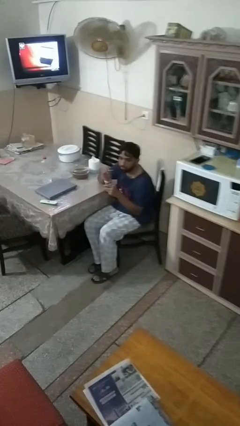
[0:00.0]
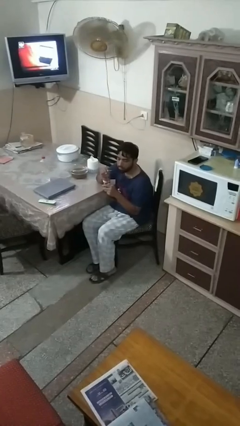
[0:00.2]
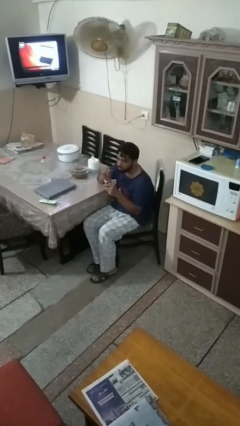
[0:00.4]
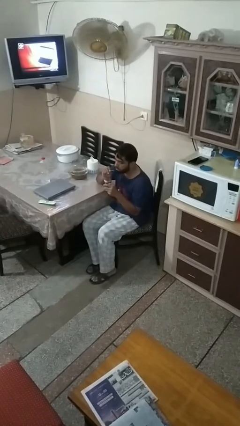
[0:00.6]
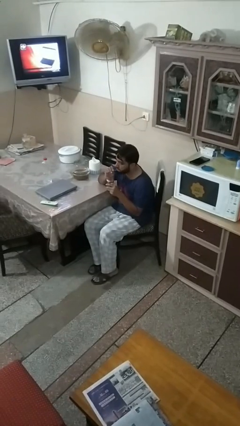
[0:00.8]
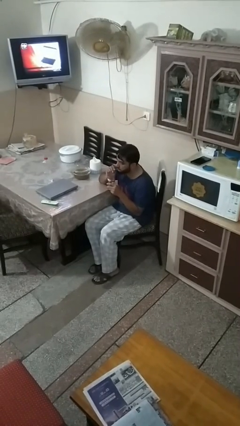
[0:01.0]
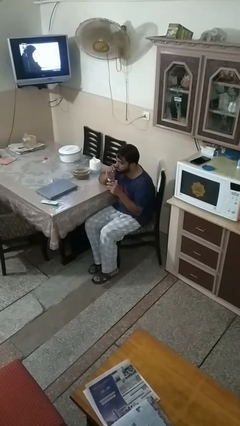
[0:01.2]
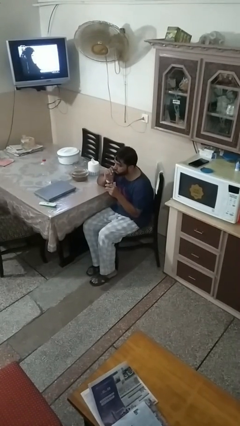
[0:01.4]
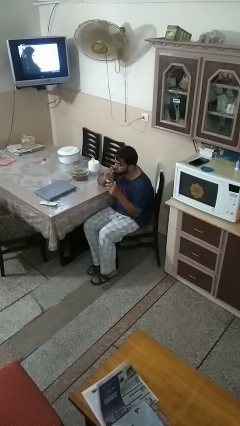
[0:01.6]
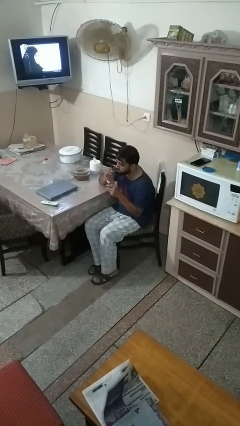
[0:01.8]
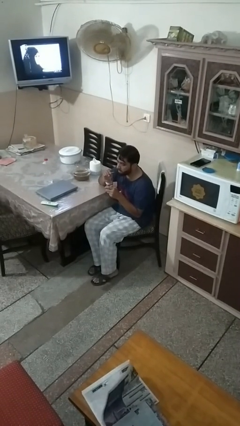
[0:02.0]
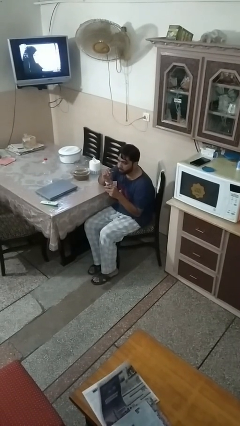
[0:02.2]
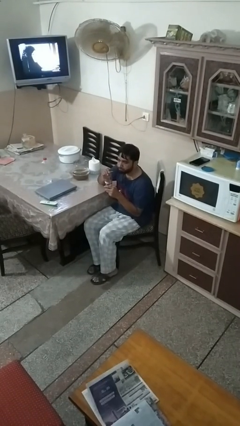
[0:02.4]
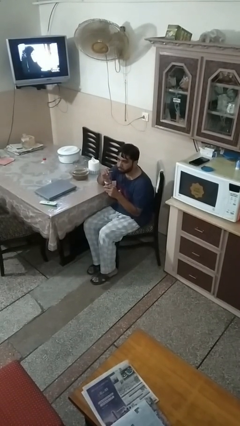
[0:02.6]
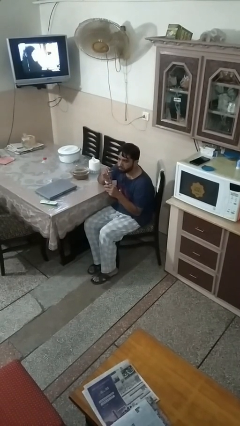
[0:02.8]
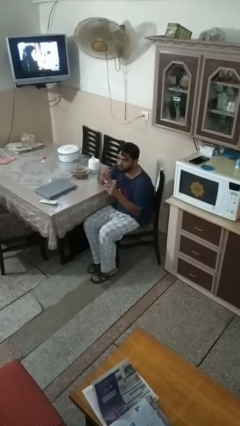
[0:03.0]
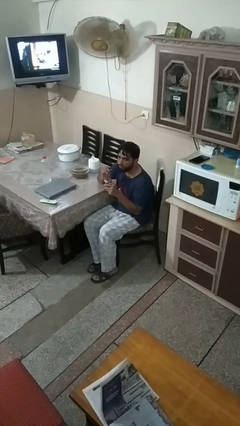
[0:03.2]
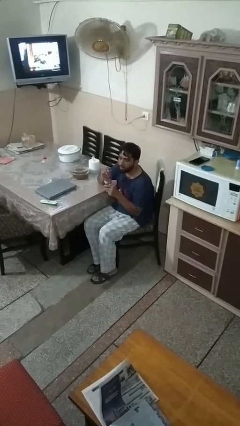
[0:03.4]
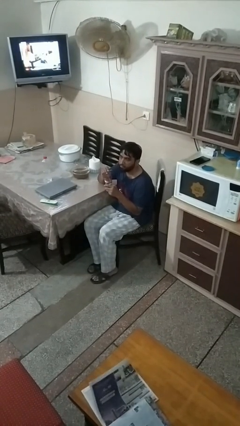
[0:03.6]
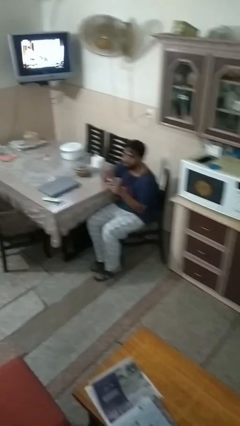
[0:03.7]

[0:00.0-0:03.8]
person drinks from straw

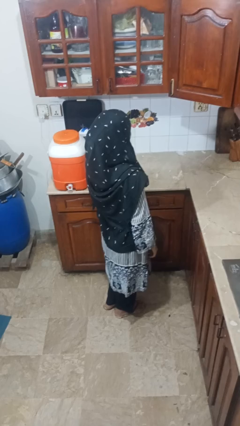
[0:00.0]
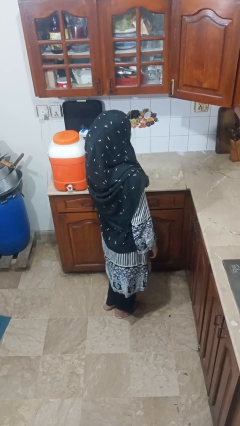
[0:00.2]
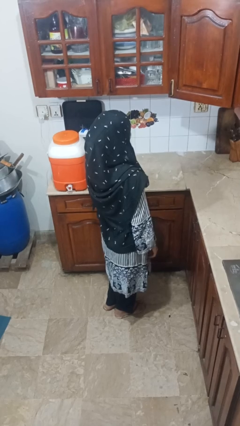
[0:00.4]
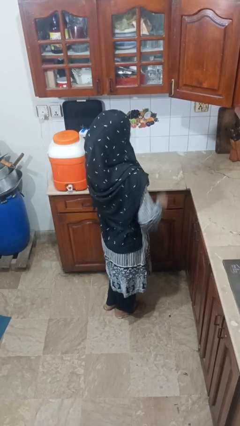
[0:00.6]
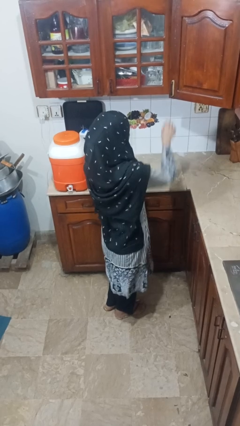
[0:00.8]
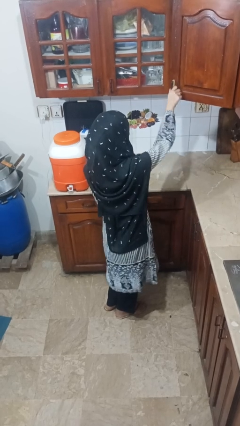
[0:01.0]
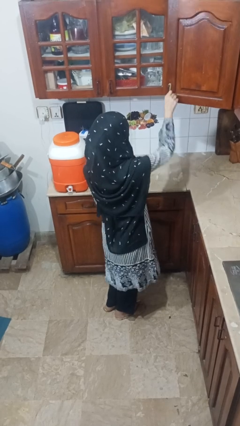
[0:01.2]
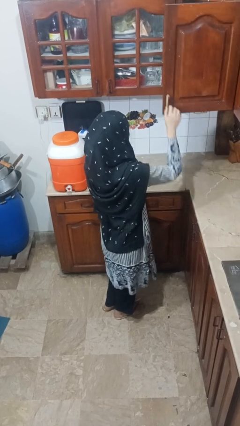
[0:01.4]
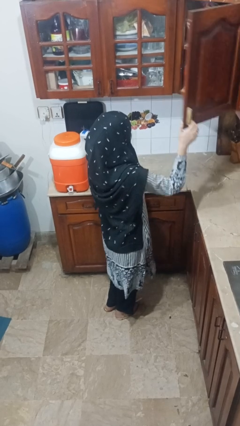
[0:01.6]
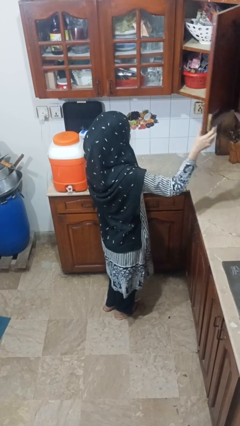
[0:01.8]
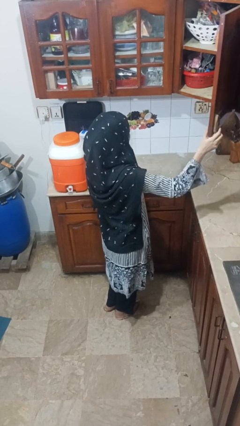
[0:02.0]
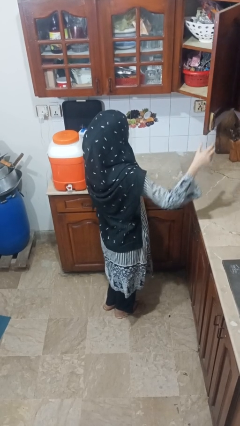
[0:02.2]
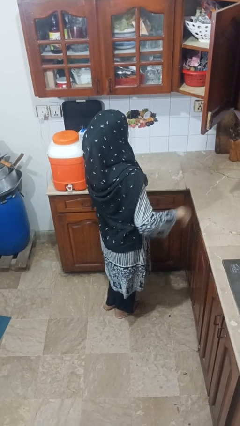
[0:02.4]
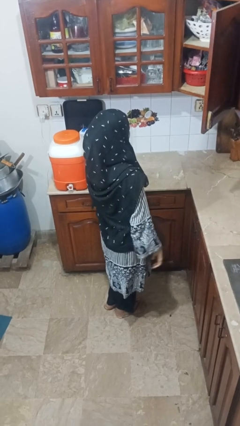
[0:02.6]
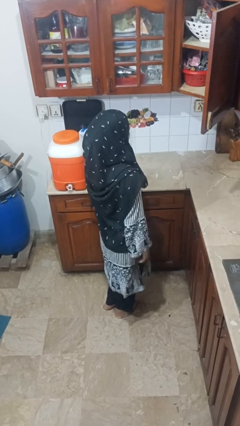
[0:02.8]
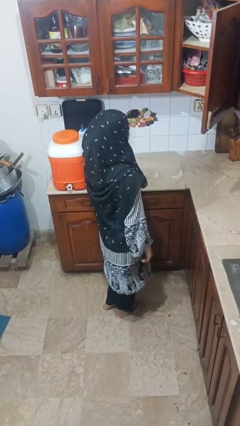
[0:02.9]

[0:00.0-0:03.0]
person opens cabinet

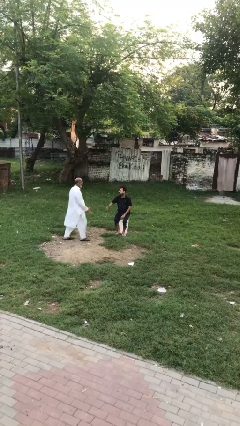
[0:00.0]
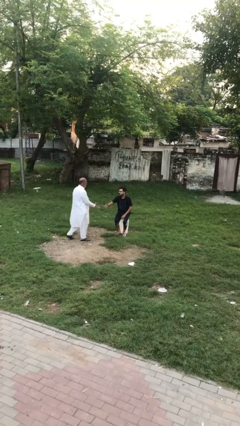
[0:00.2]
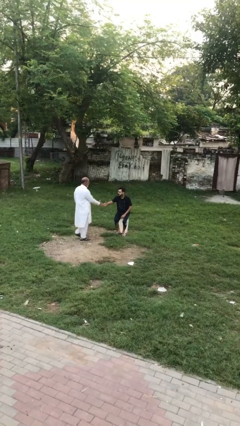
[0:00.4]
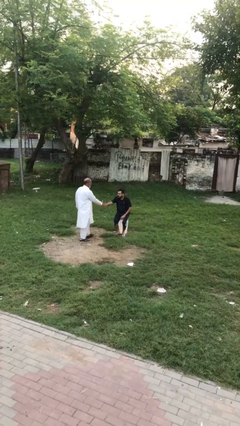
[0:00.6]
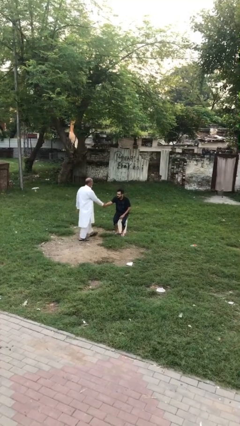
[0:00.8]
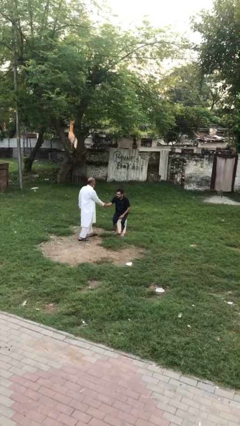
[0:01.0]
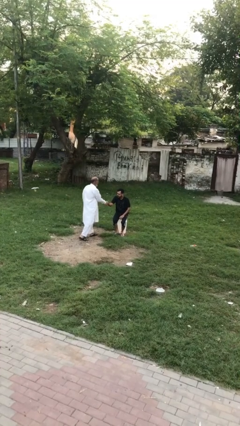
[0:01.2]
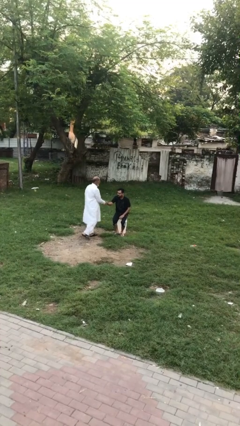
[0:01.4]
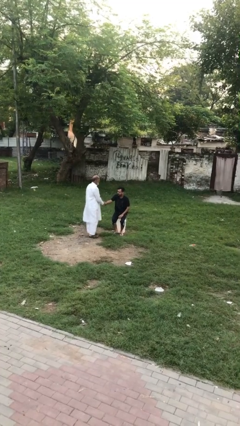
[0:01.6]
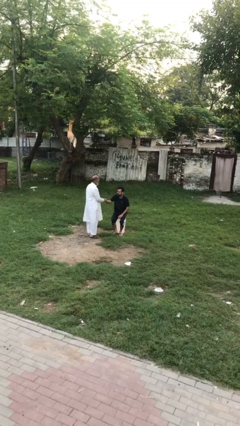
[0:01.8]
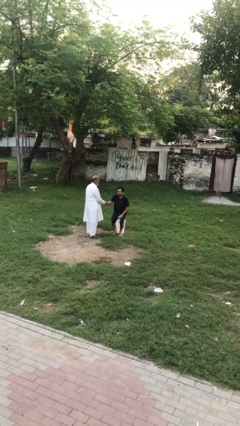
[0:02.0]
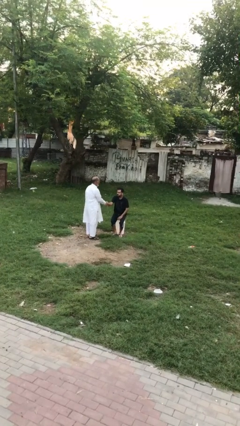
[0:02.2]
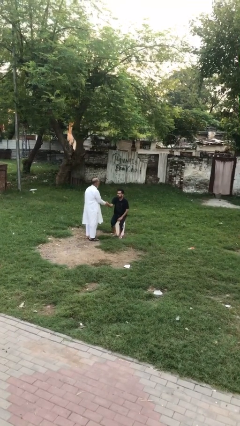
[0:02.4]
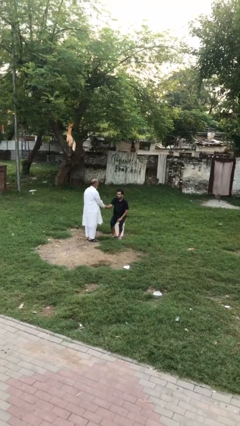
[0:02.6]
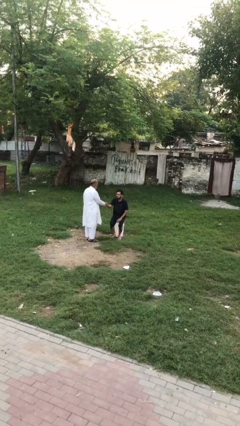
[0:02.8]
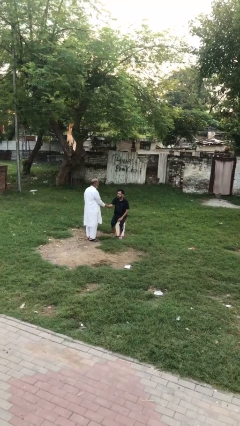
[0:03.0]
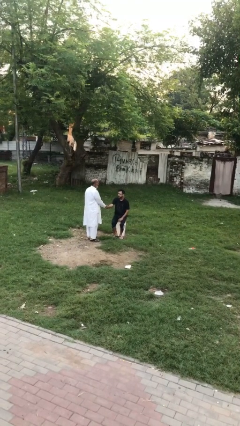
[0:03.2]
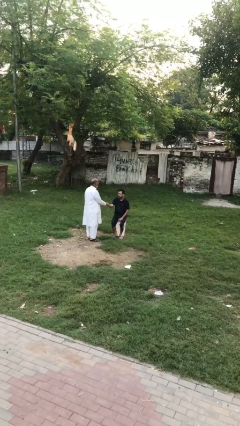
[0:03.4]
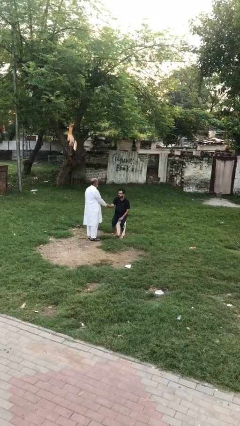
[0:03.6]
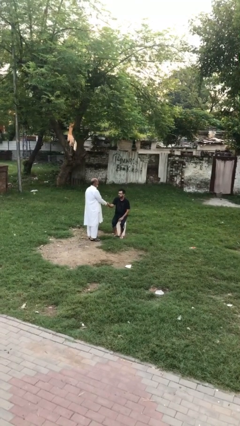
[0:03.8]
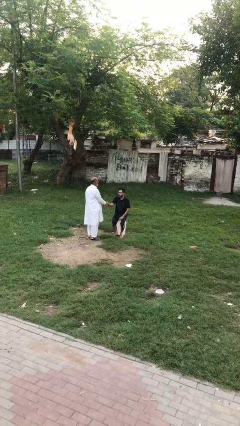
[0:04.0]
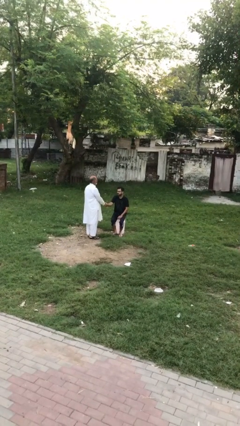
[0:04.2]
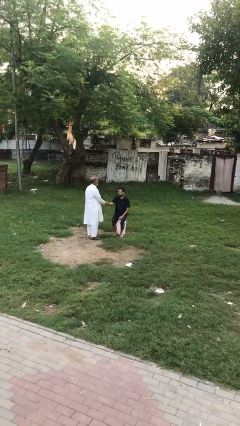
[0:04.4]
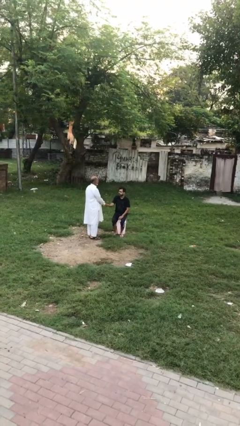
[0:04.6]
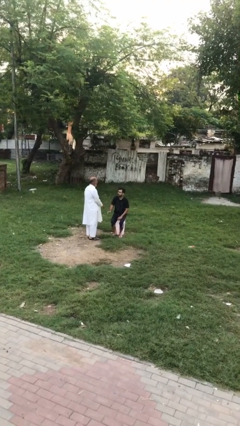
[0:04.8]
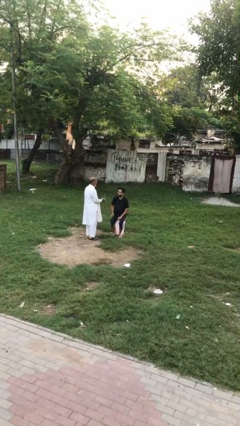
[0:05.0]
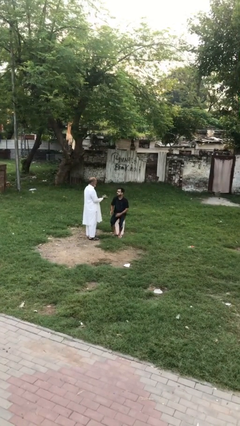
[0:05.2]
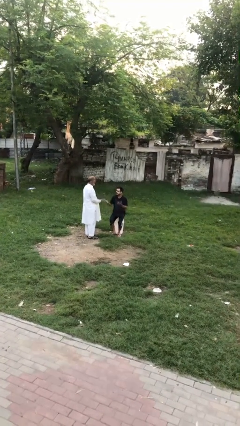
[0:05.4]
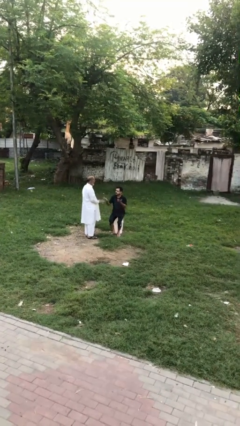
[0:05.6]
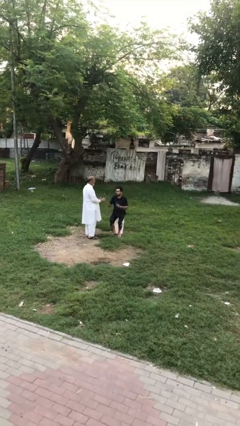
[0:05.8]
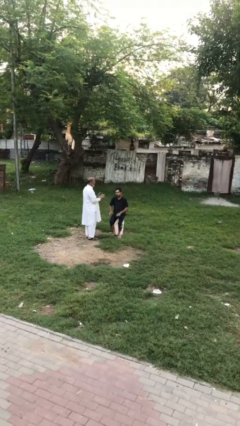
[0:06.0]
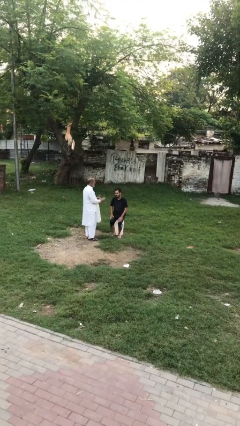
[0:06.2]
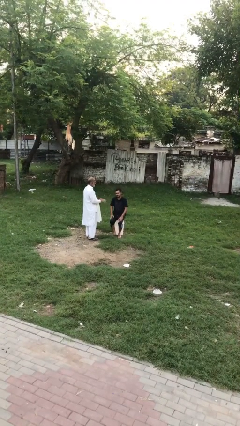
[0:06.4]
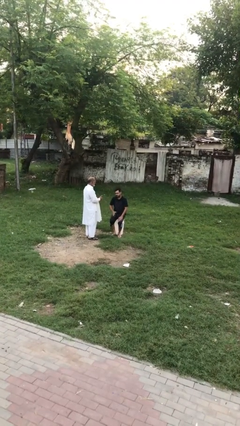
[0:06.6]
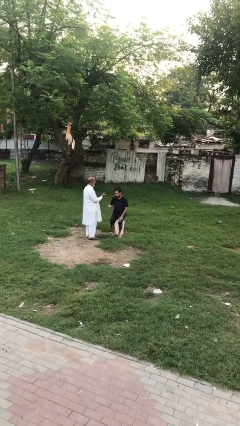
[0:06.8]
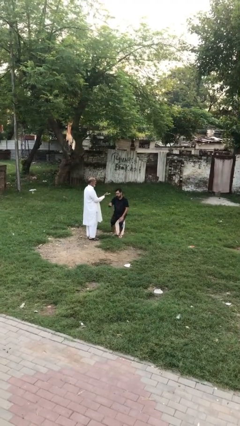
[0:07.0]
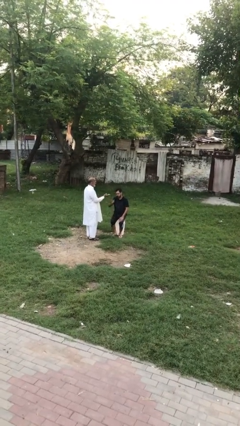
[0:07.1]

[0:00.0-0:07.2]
person shakes hand

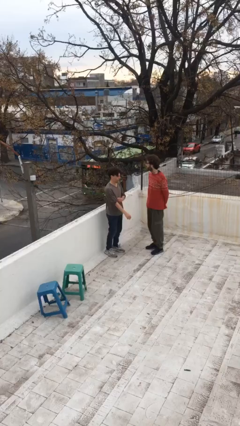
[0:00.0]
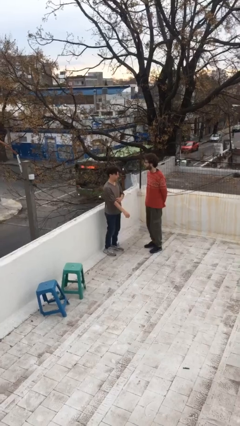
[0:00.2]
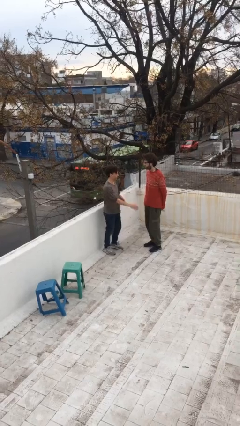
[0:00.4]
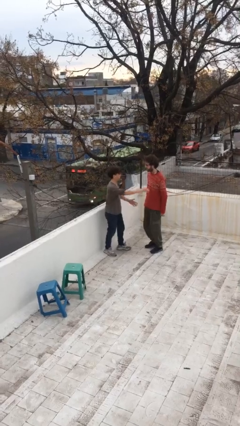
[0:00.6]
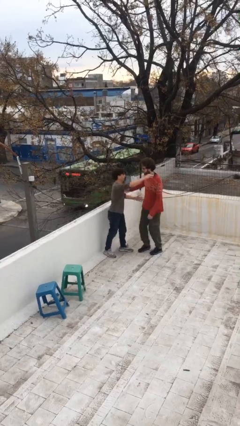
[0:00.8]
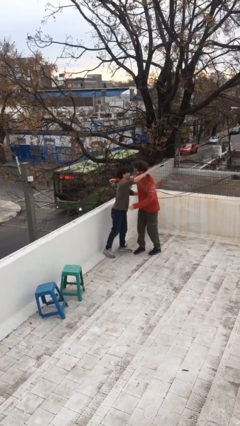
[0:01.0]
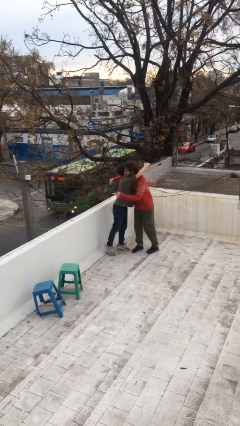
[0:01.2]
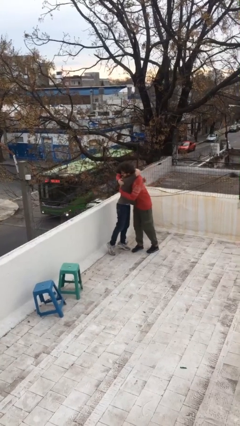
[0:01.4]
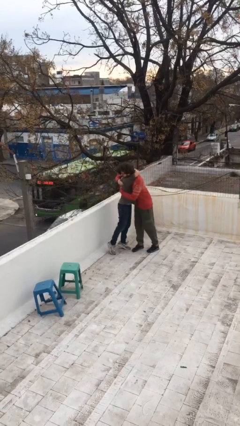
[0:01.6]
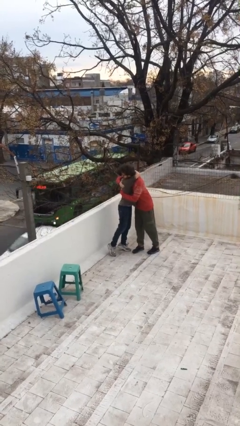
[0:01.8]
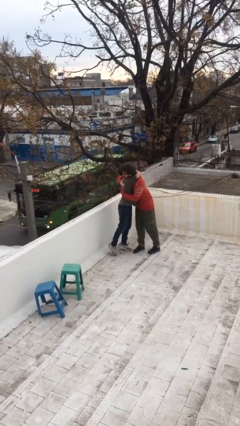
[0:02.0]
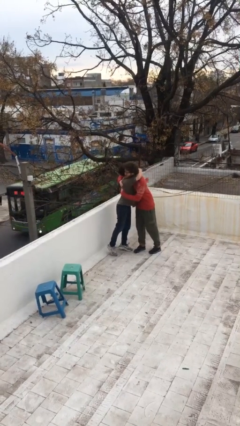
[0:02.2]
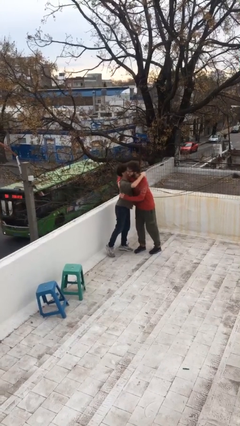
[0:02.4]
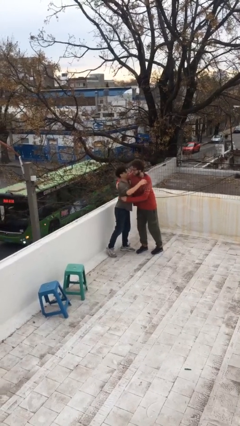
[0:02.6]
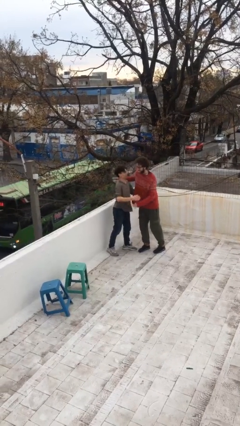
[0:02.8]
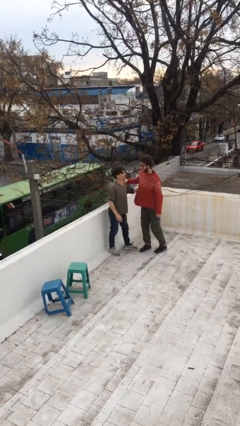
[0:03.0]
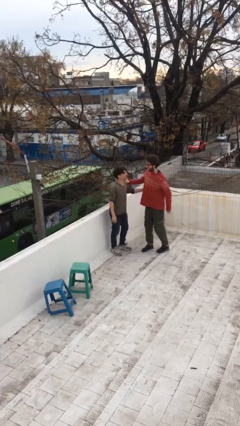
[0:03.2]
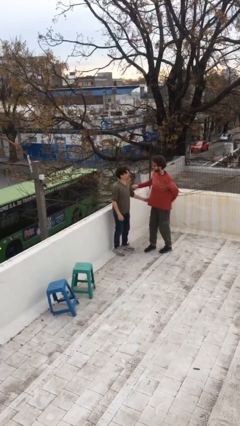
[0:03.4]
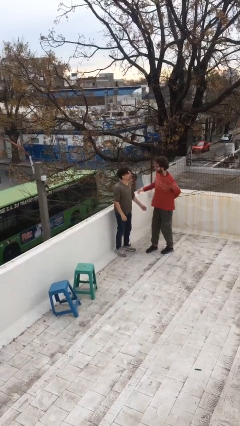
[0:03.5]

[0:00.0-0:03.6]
person embraces person
